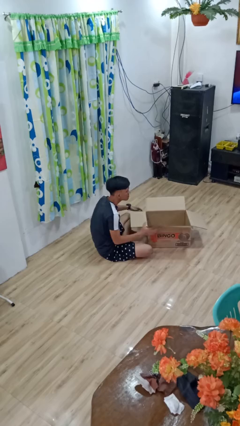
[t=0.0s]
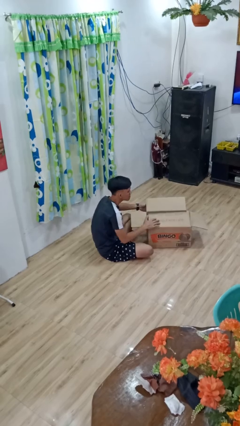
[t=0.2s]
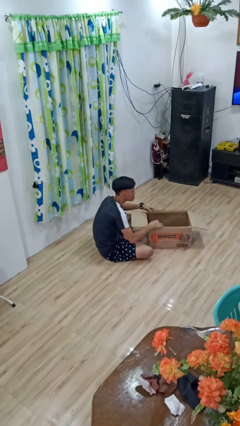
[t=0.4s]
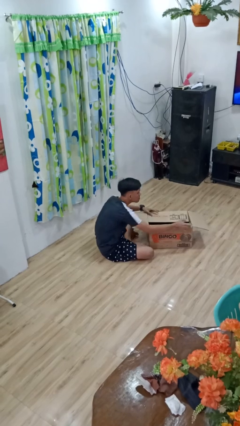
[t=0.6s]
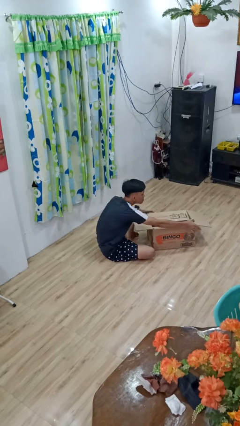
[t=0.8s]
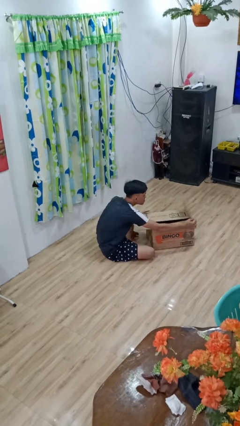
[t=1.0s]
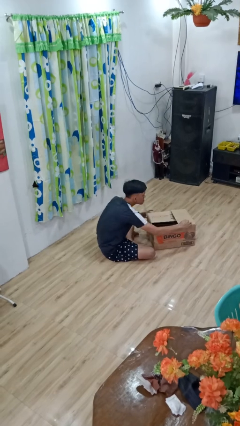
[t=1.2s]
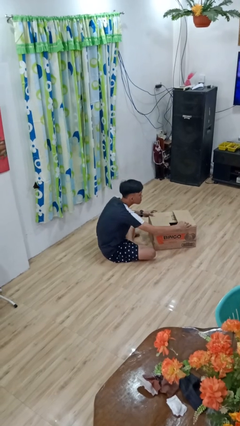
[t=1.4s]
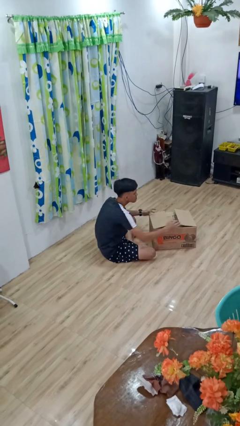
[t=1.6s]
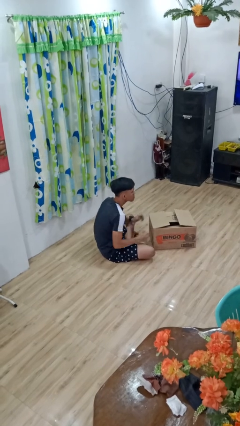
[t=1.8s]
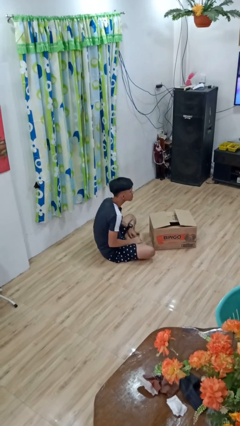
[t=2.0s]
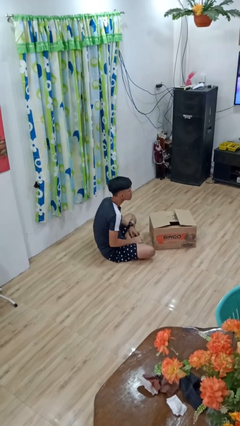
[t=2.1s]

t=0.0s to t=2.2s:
person closes box

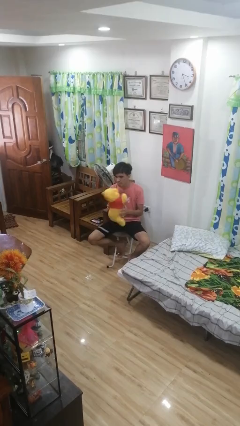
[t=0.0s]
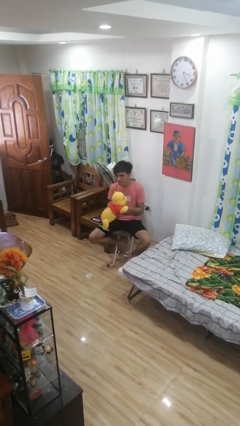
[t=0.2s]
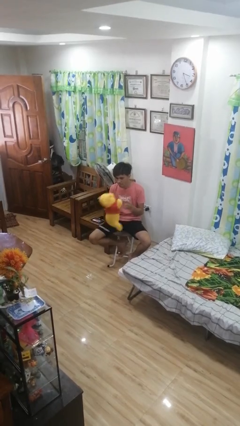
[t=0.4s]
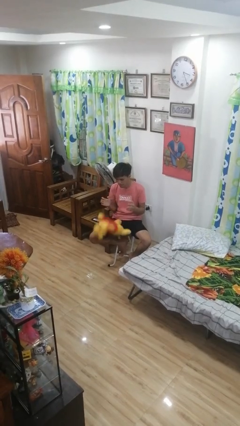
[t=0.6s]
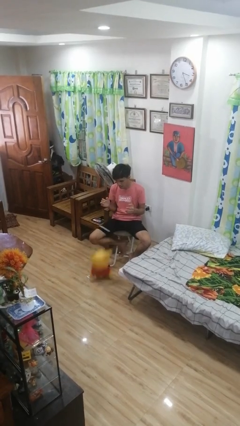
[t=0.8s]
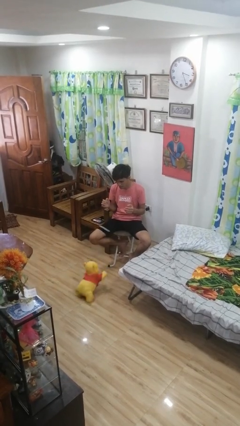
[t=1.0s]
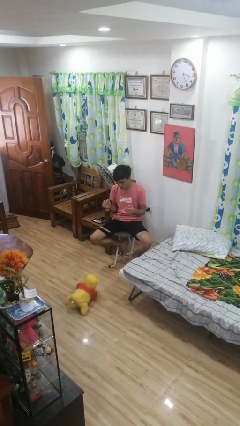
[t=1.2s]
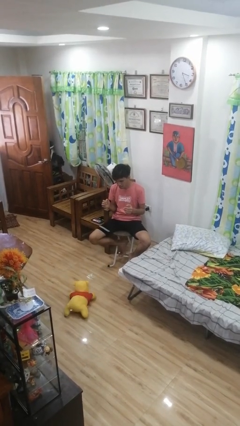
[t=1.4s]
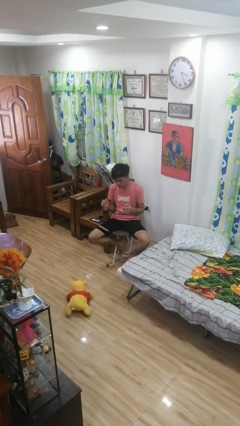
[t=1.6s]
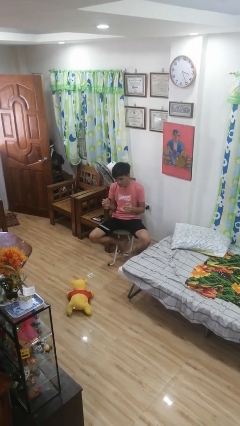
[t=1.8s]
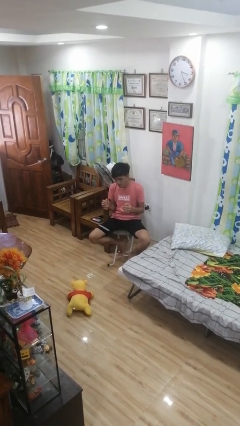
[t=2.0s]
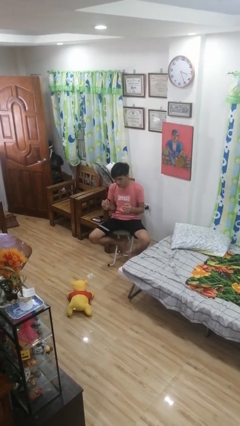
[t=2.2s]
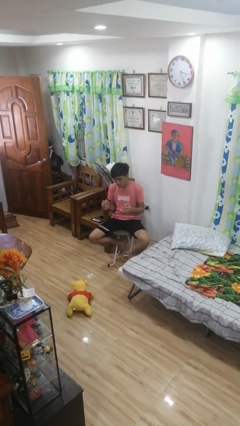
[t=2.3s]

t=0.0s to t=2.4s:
person drops object

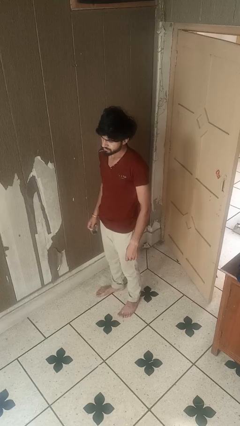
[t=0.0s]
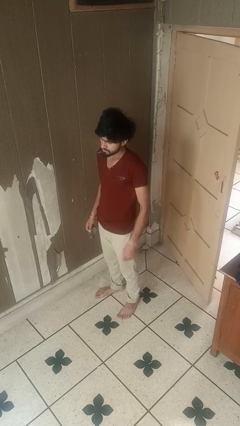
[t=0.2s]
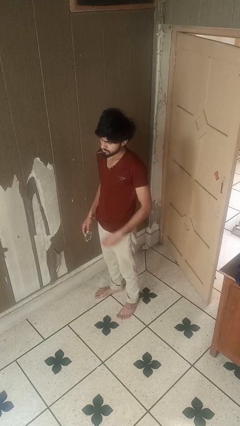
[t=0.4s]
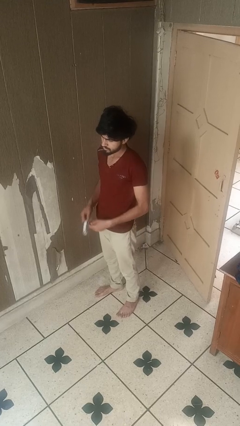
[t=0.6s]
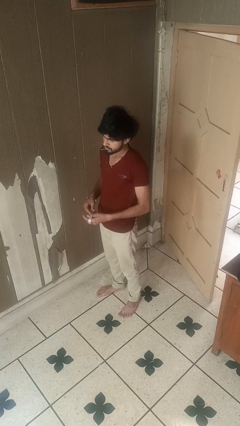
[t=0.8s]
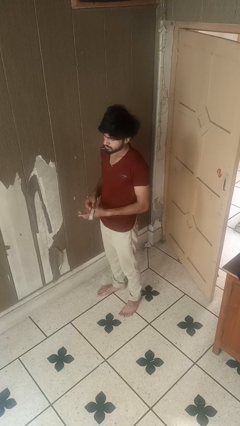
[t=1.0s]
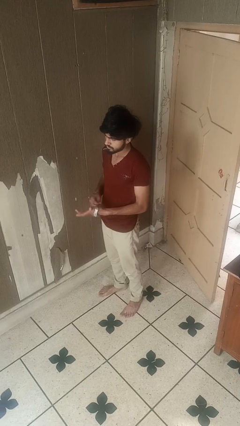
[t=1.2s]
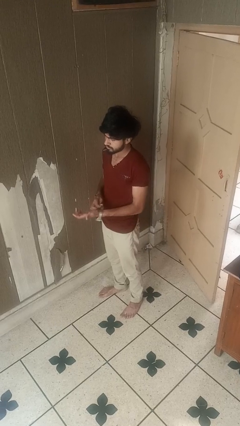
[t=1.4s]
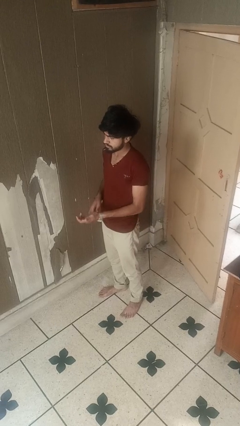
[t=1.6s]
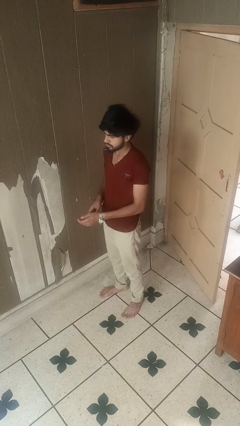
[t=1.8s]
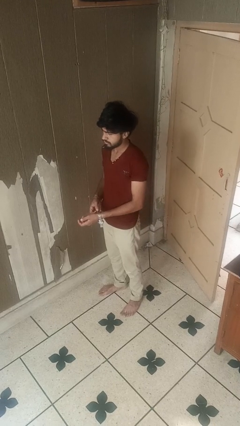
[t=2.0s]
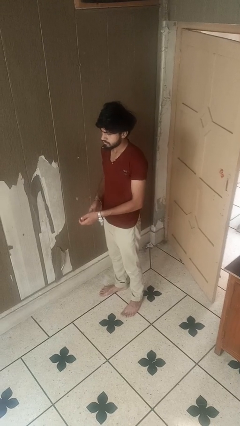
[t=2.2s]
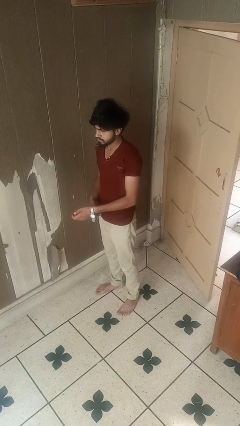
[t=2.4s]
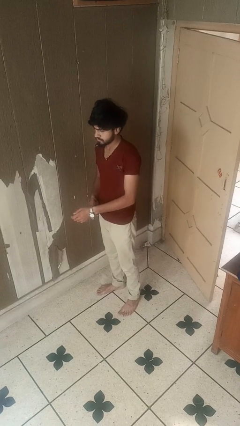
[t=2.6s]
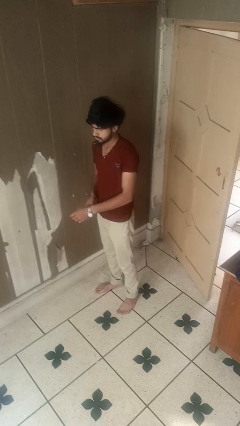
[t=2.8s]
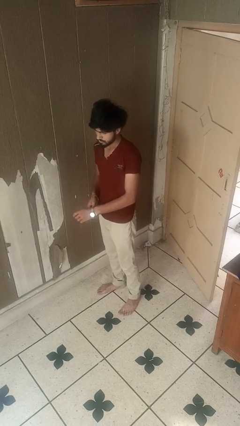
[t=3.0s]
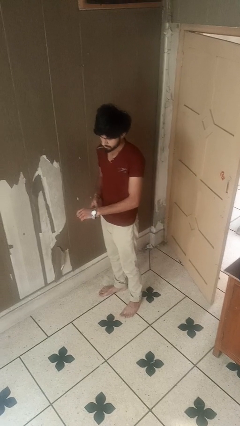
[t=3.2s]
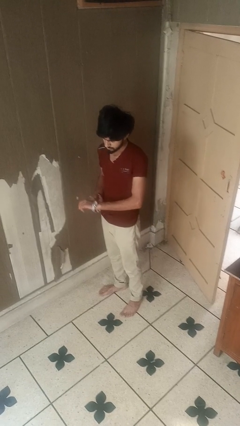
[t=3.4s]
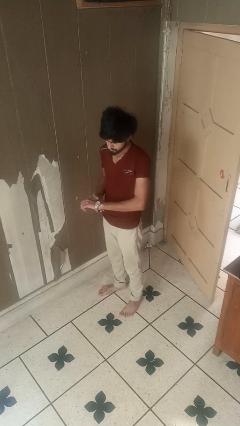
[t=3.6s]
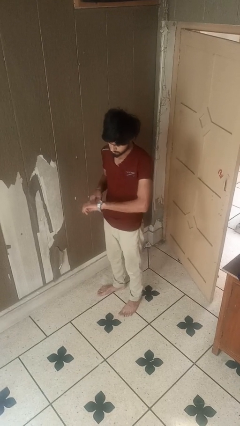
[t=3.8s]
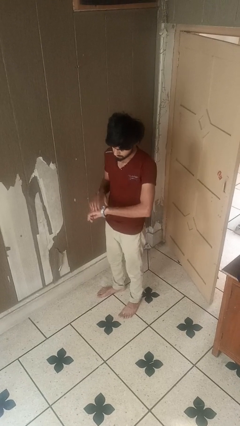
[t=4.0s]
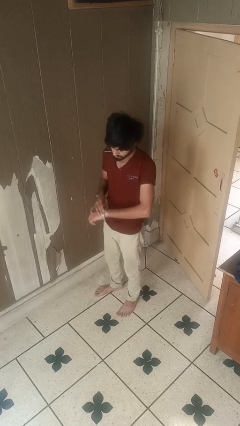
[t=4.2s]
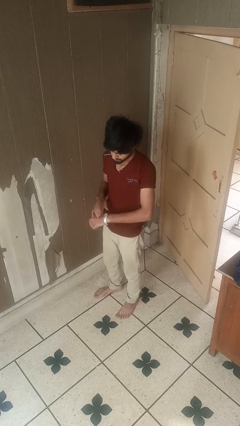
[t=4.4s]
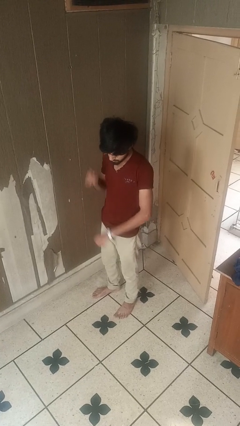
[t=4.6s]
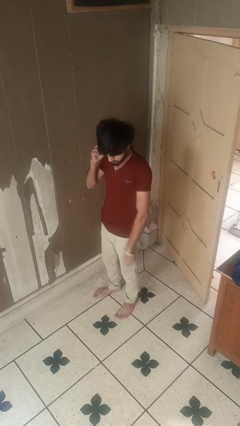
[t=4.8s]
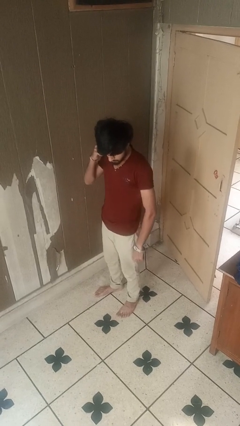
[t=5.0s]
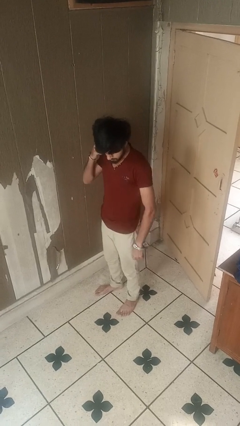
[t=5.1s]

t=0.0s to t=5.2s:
person puts on wristwatch

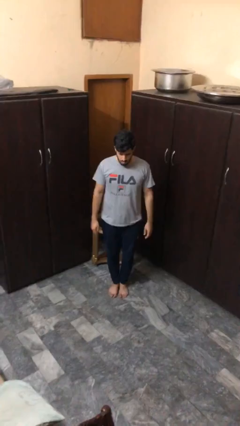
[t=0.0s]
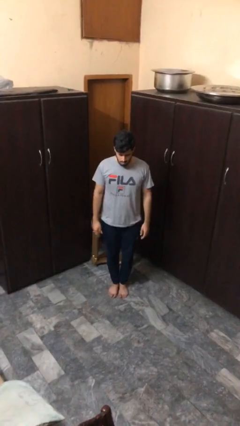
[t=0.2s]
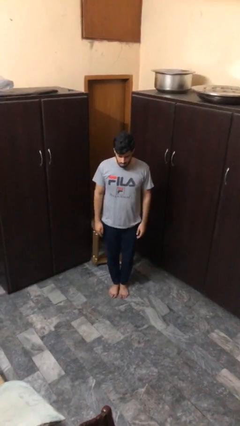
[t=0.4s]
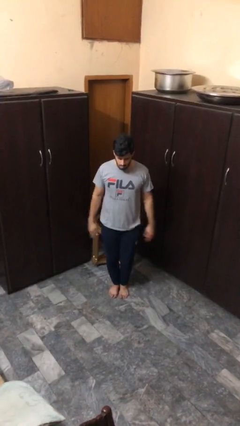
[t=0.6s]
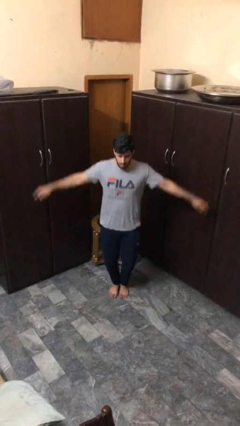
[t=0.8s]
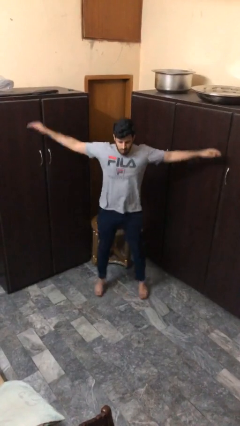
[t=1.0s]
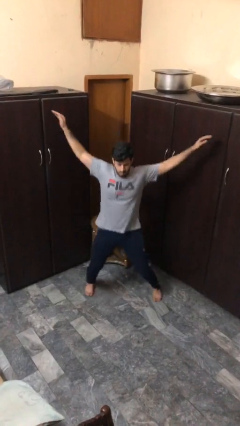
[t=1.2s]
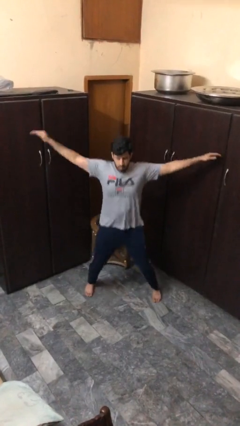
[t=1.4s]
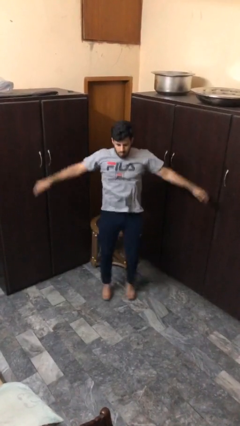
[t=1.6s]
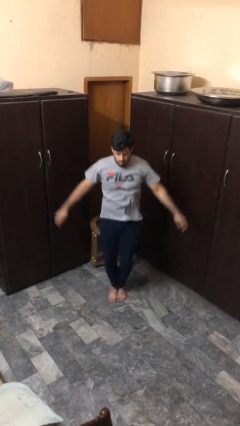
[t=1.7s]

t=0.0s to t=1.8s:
person exercises with jumping jacks

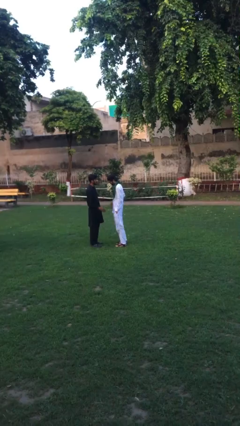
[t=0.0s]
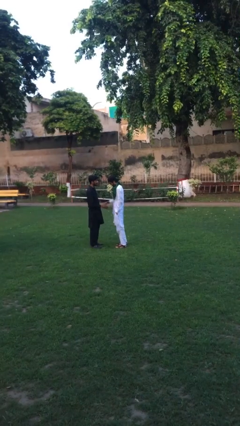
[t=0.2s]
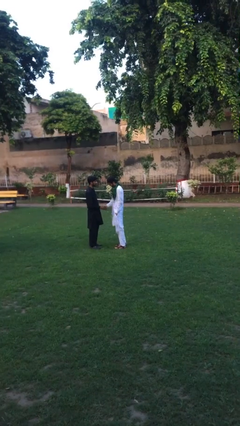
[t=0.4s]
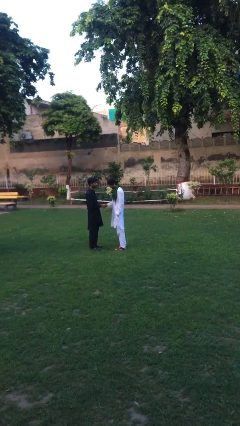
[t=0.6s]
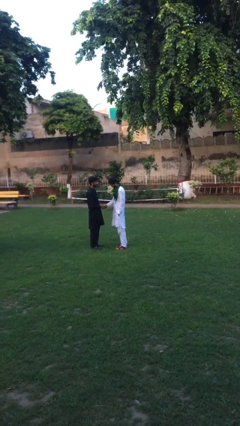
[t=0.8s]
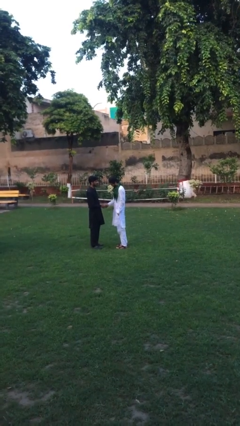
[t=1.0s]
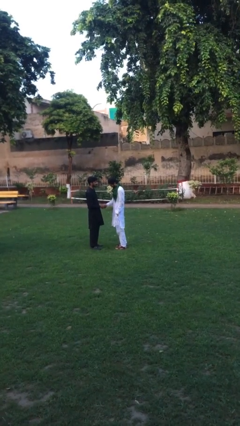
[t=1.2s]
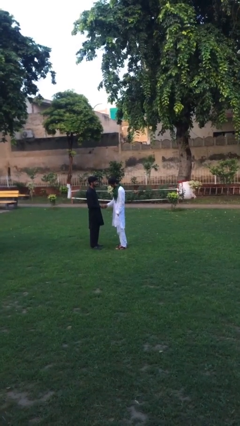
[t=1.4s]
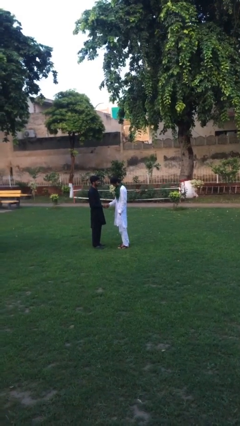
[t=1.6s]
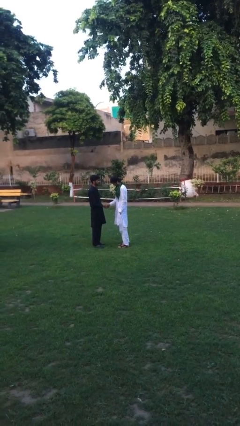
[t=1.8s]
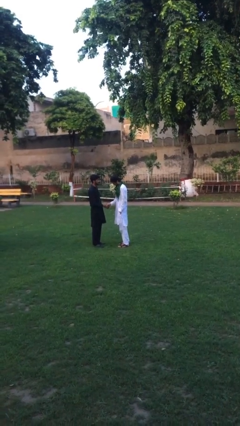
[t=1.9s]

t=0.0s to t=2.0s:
person shakes hand

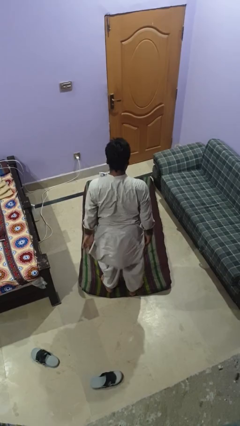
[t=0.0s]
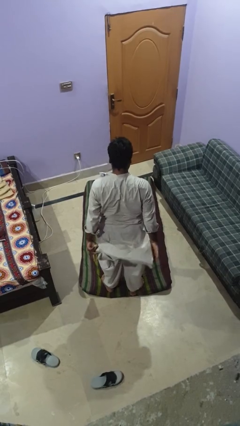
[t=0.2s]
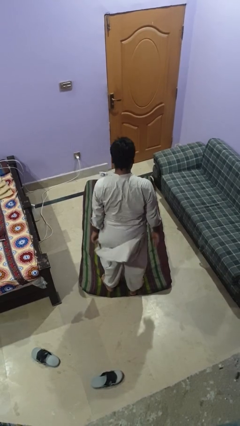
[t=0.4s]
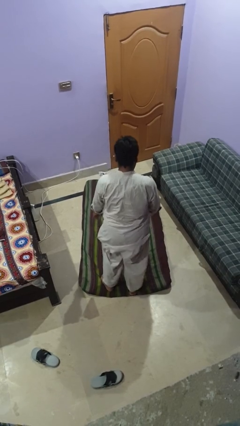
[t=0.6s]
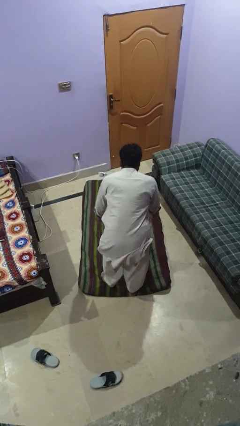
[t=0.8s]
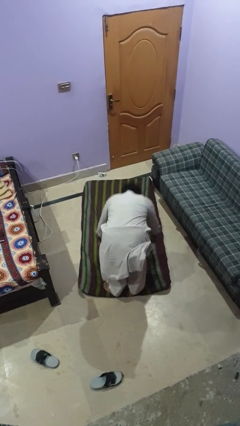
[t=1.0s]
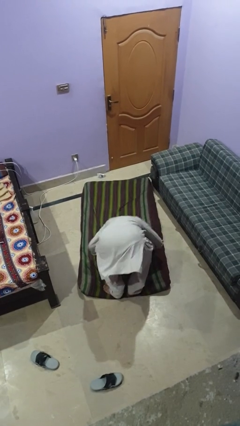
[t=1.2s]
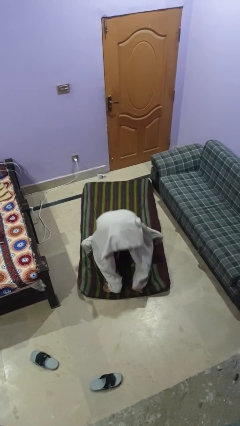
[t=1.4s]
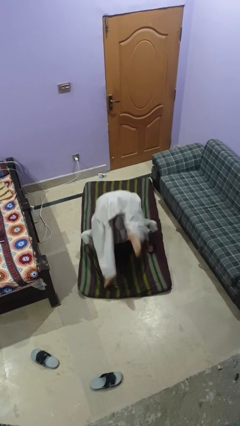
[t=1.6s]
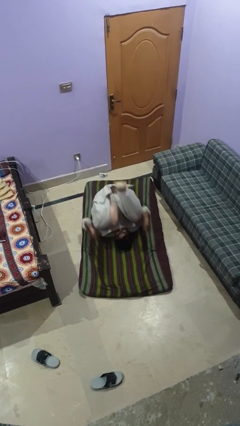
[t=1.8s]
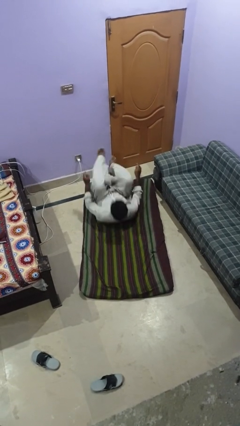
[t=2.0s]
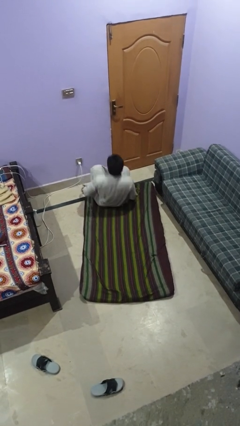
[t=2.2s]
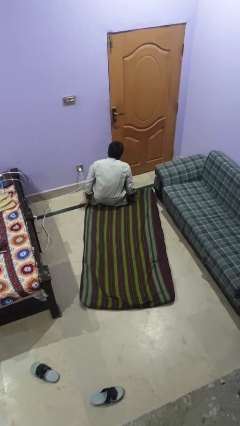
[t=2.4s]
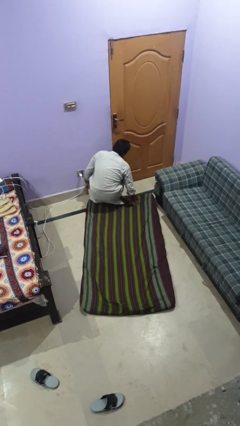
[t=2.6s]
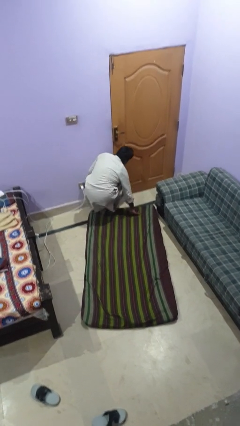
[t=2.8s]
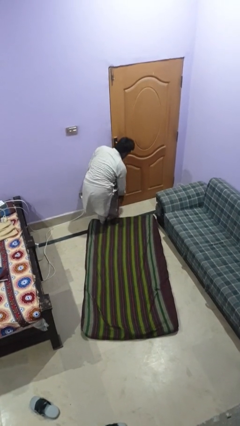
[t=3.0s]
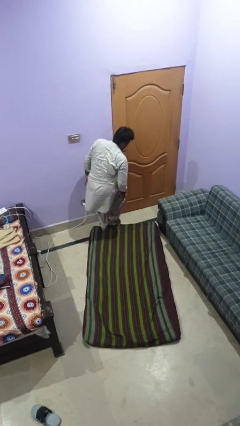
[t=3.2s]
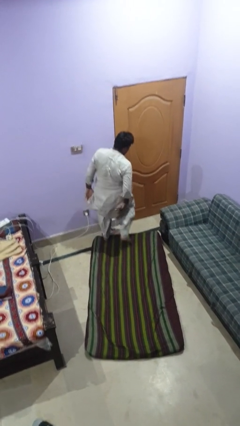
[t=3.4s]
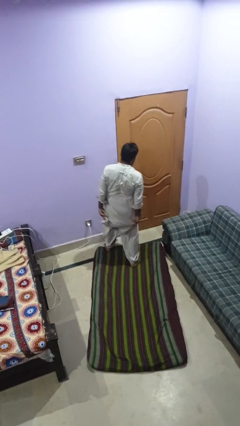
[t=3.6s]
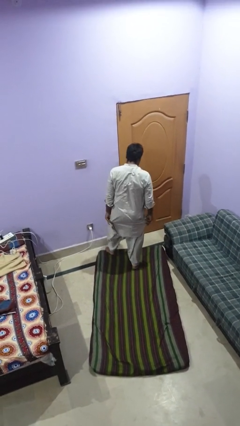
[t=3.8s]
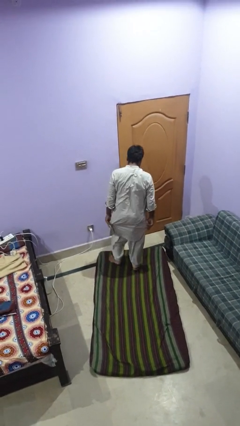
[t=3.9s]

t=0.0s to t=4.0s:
person somersaults
